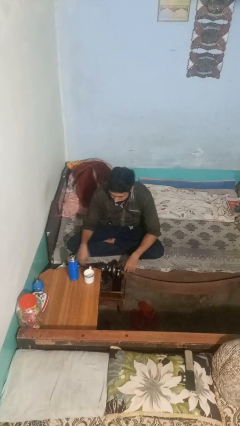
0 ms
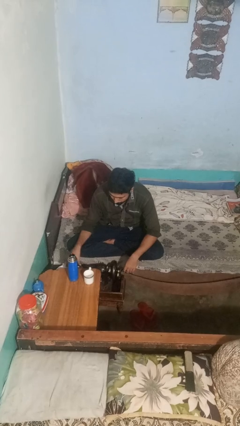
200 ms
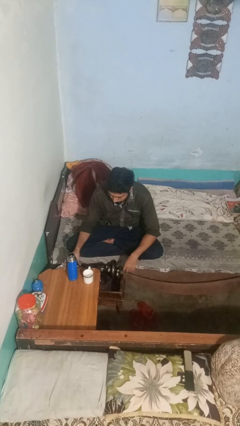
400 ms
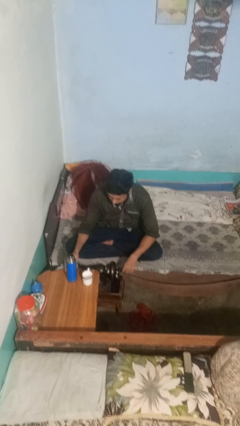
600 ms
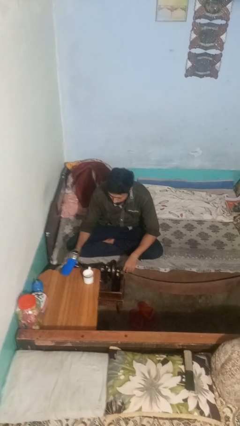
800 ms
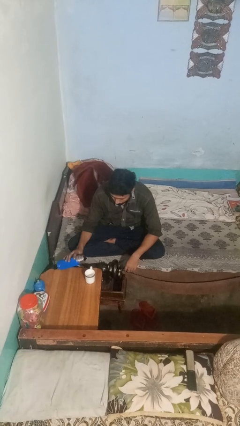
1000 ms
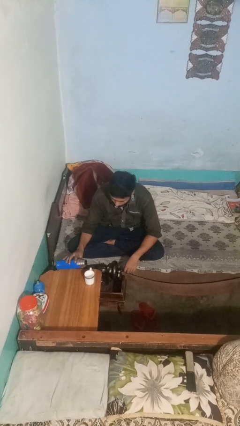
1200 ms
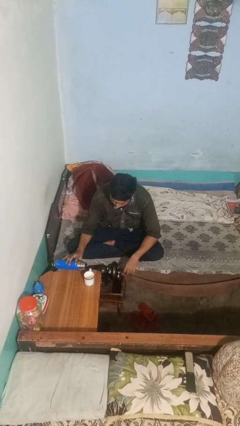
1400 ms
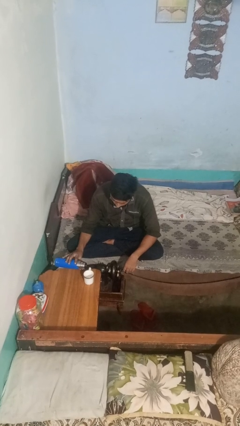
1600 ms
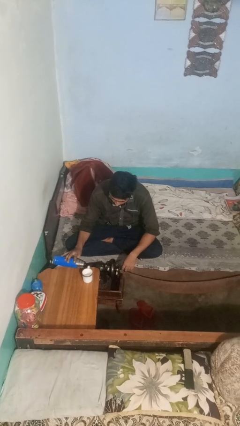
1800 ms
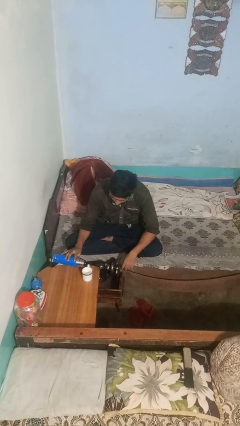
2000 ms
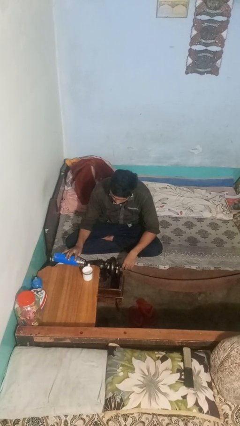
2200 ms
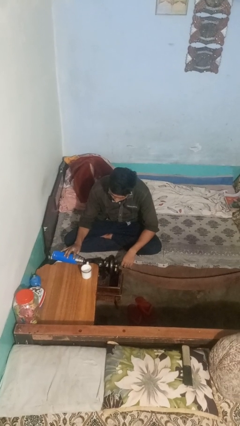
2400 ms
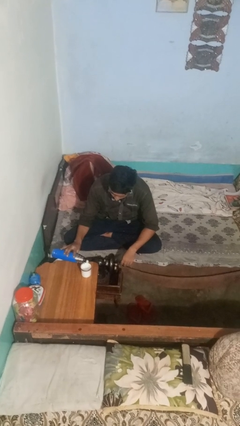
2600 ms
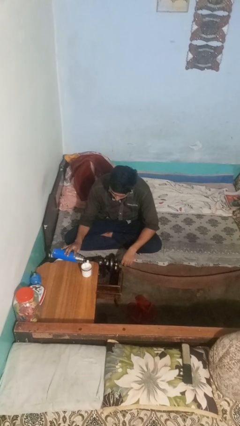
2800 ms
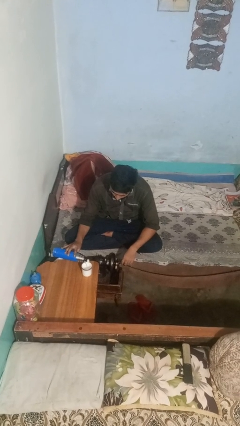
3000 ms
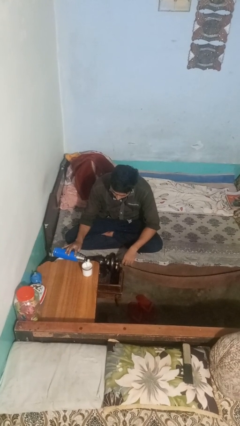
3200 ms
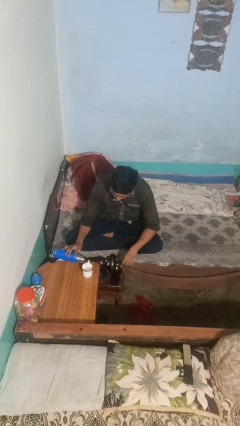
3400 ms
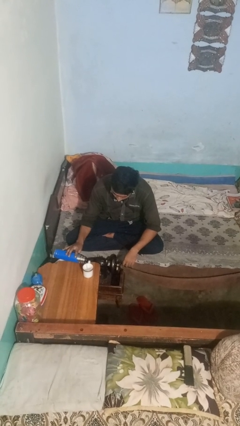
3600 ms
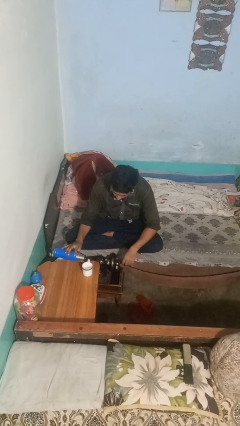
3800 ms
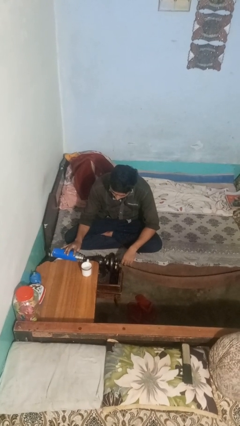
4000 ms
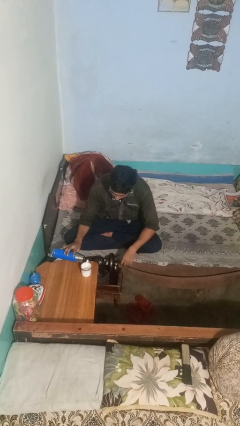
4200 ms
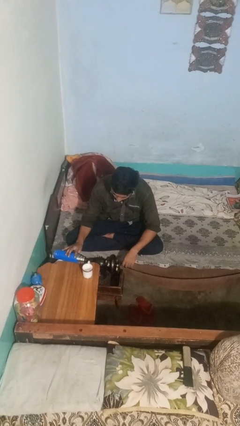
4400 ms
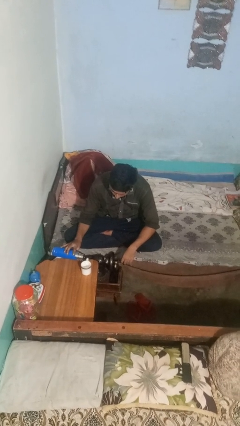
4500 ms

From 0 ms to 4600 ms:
person pours liquid into cup

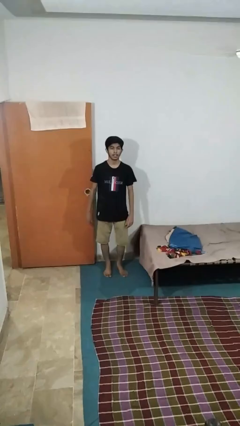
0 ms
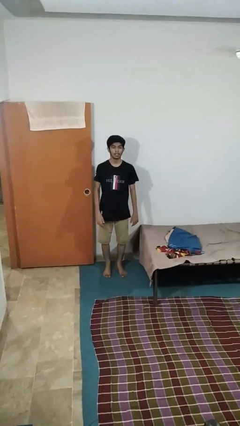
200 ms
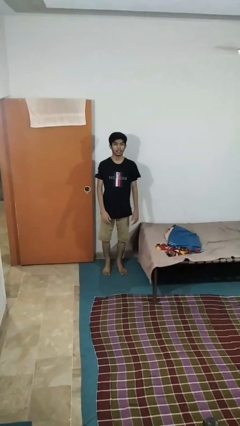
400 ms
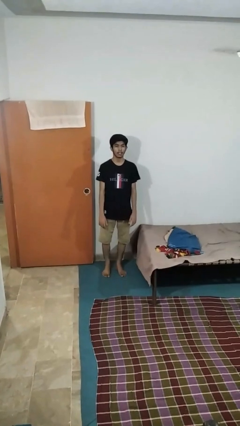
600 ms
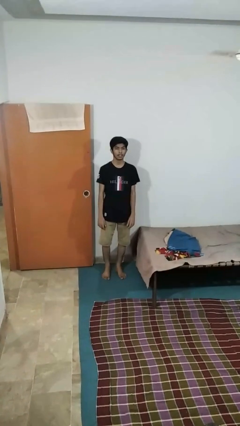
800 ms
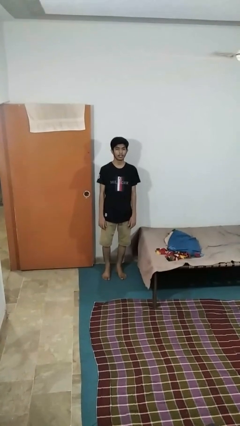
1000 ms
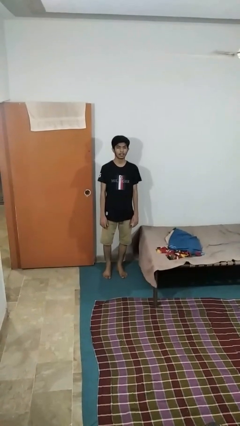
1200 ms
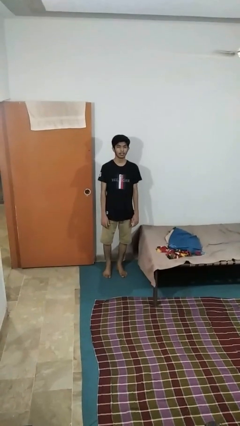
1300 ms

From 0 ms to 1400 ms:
person stands up from floor

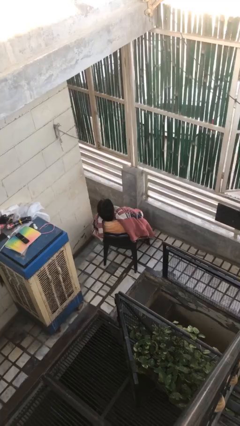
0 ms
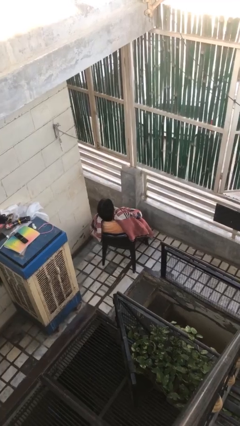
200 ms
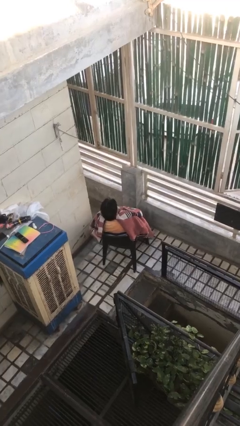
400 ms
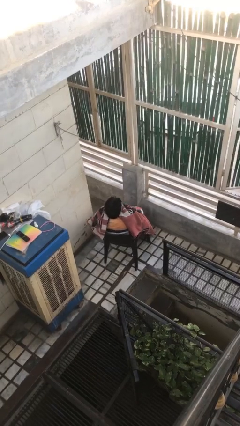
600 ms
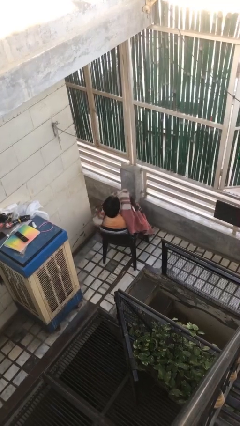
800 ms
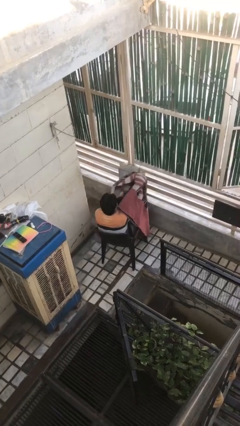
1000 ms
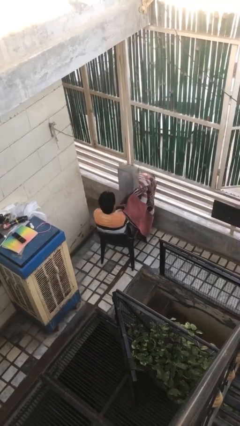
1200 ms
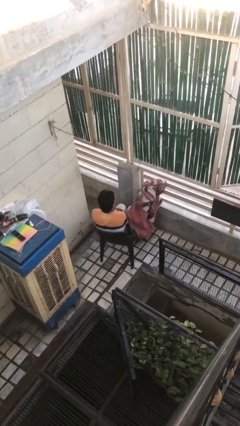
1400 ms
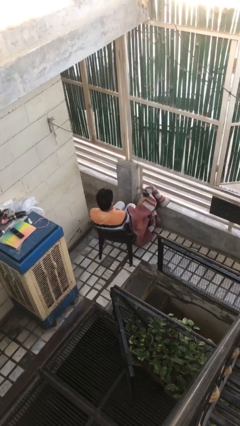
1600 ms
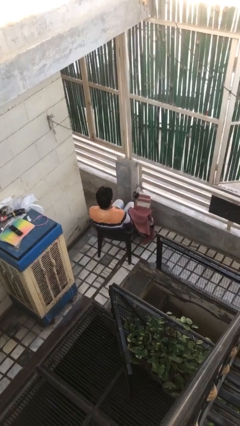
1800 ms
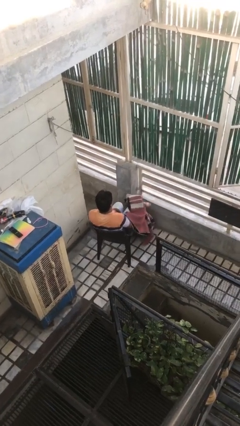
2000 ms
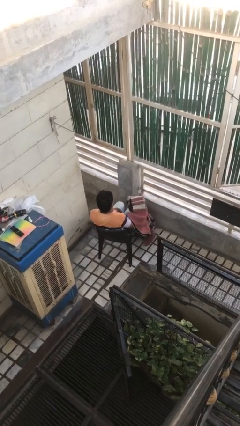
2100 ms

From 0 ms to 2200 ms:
person uncovers with blanket

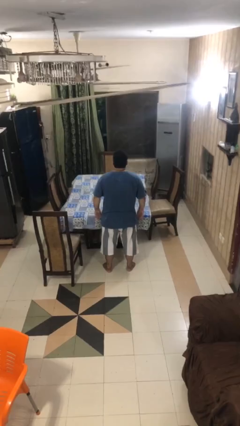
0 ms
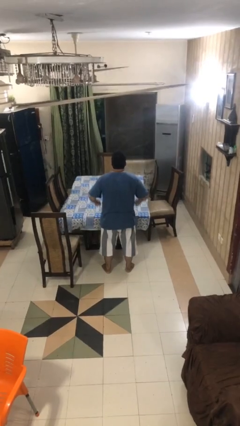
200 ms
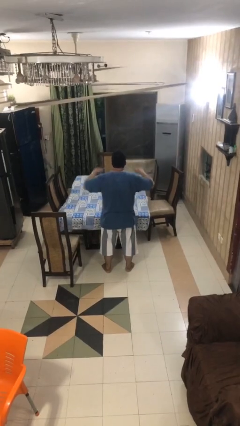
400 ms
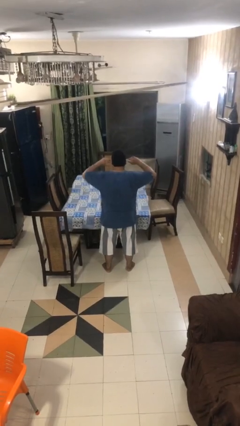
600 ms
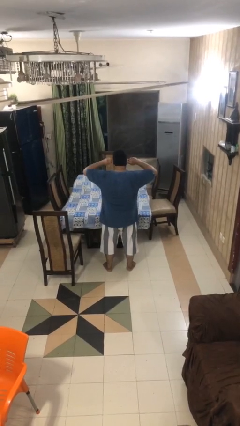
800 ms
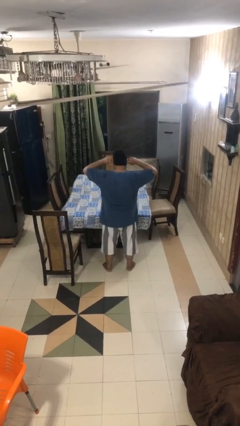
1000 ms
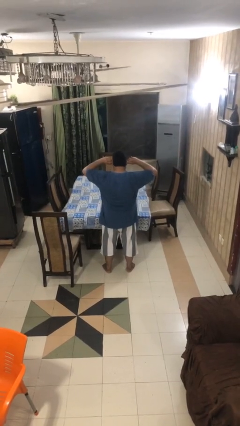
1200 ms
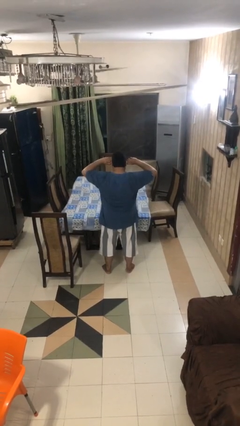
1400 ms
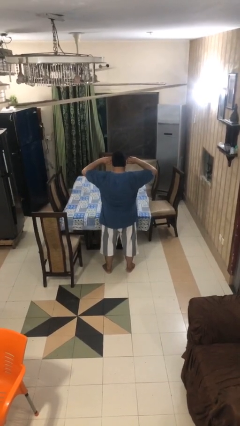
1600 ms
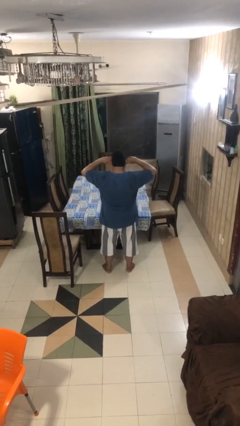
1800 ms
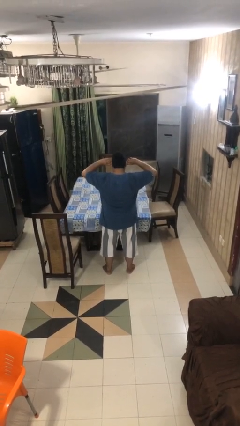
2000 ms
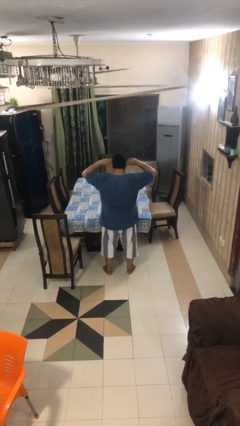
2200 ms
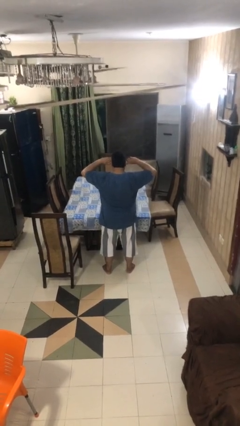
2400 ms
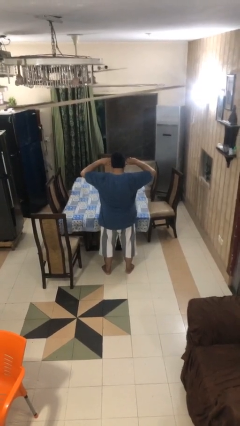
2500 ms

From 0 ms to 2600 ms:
person puts fingers in ear

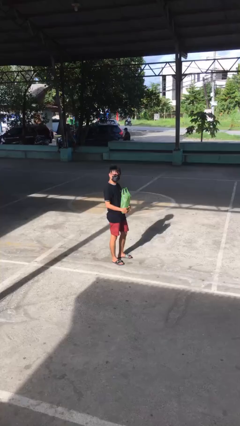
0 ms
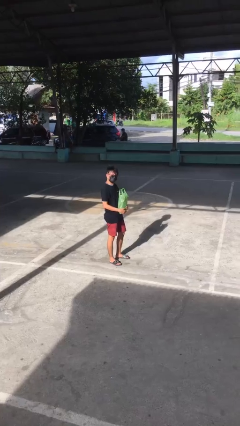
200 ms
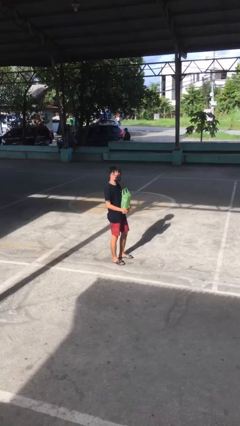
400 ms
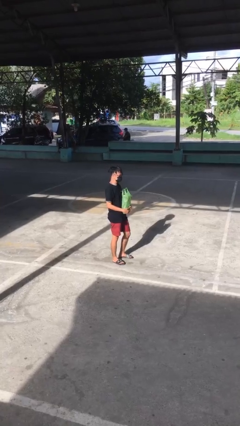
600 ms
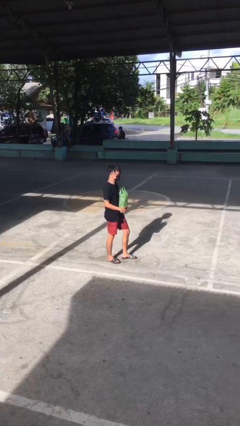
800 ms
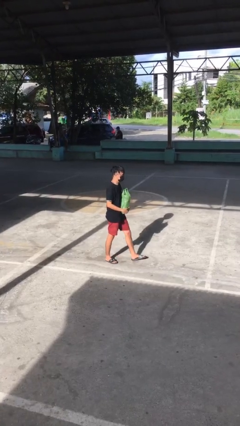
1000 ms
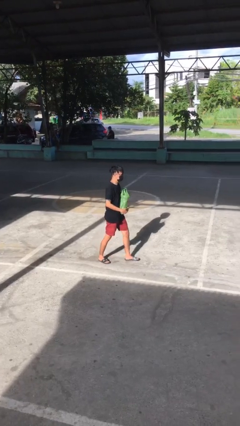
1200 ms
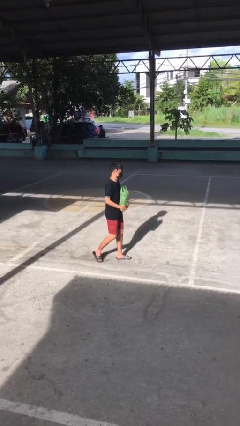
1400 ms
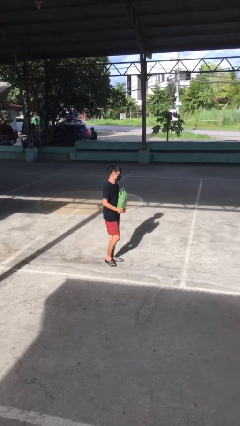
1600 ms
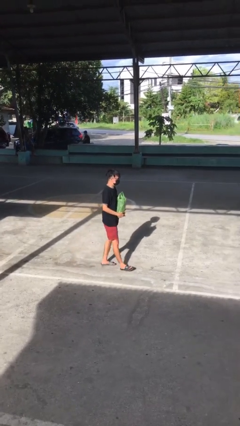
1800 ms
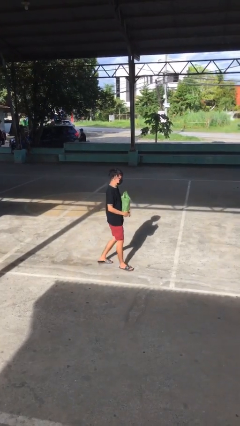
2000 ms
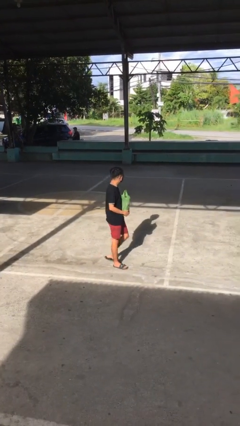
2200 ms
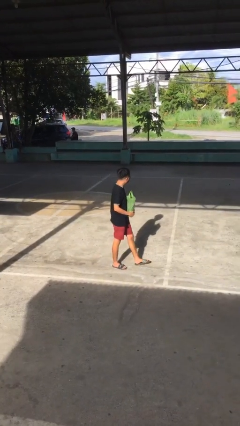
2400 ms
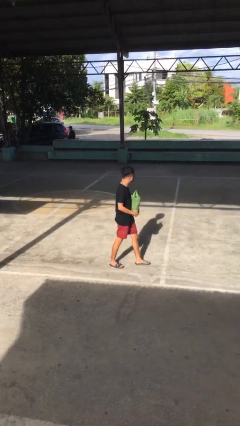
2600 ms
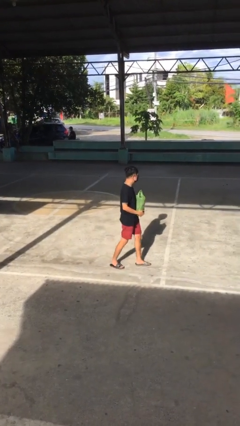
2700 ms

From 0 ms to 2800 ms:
person carries groceries

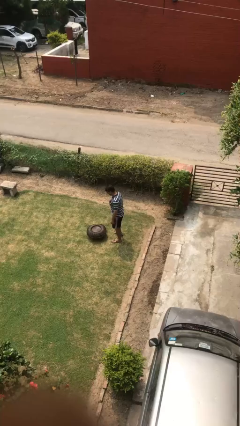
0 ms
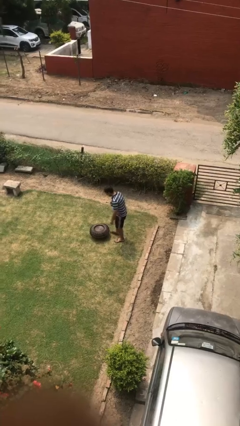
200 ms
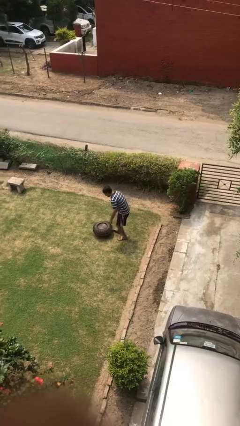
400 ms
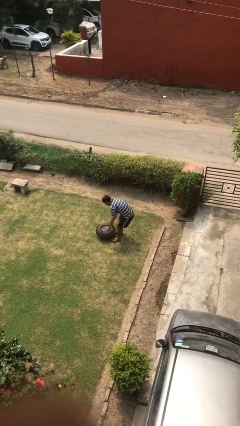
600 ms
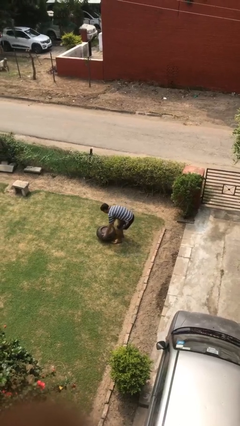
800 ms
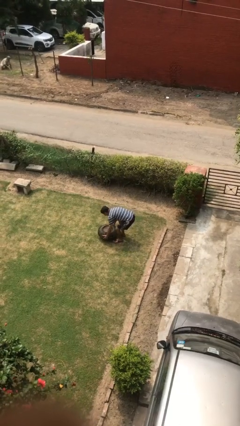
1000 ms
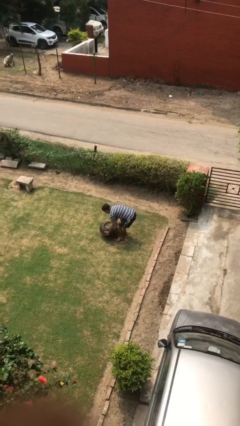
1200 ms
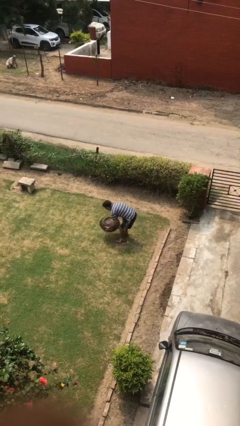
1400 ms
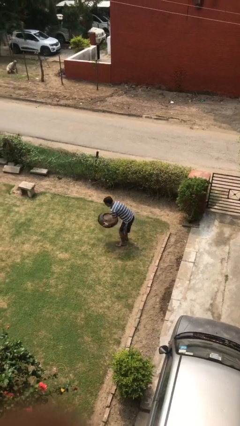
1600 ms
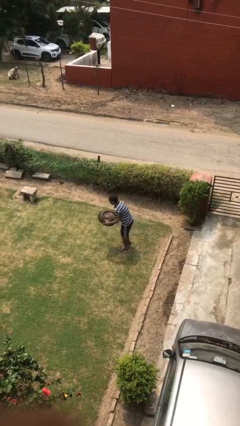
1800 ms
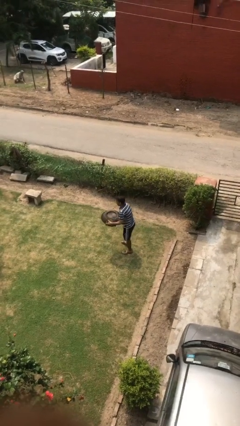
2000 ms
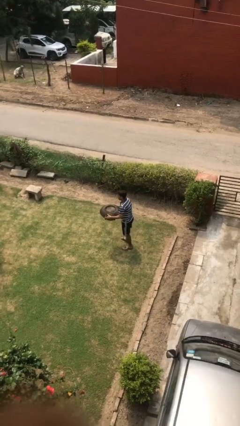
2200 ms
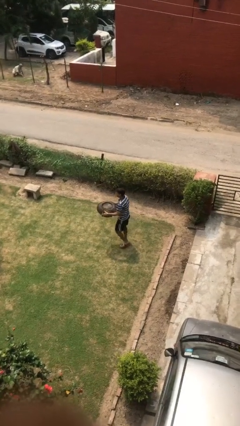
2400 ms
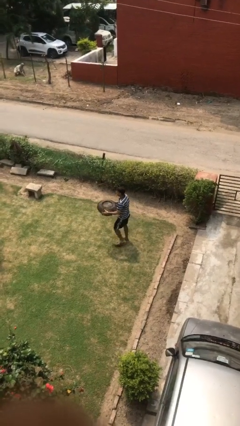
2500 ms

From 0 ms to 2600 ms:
person picks up object from floor

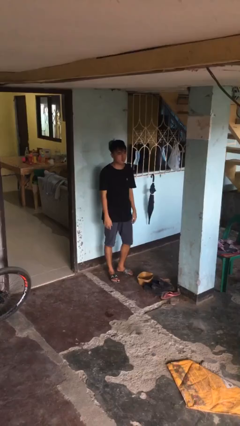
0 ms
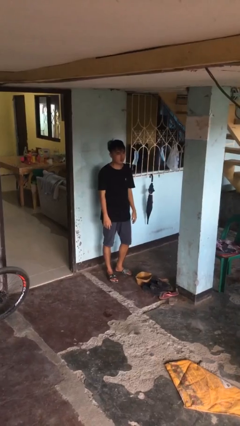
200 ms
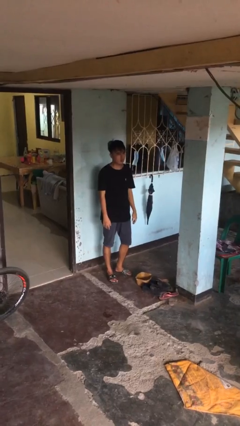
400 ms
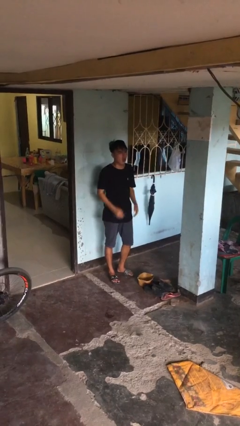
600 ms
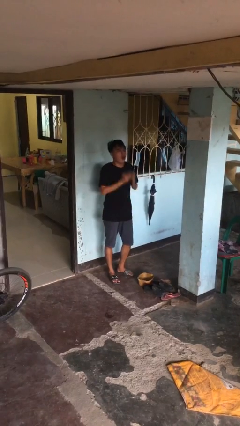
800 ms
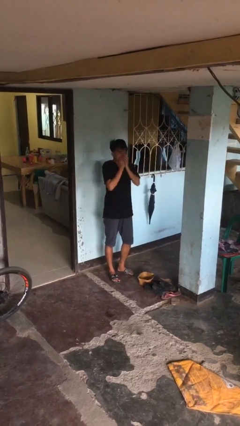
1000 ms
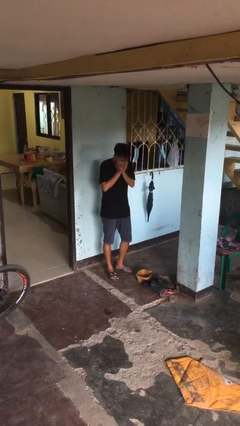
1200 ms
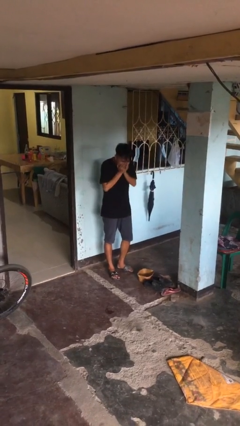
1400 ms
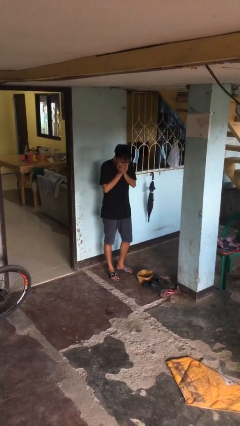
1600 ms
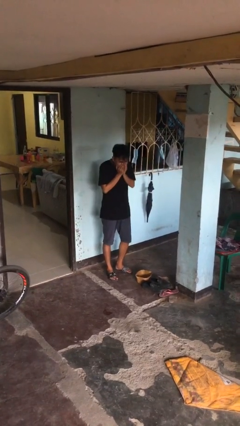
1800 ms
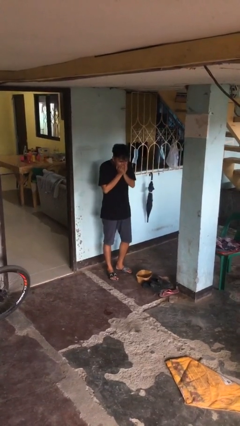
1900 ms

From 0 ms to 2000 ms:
person sneezes into hand
